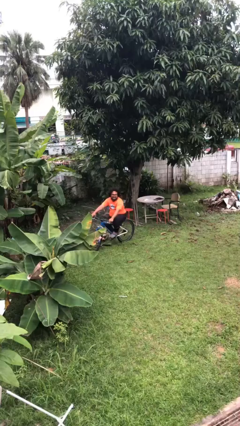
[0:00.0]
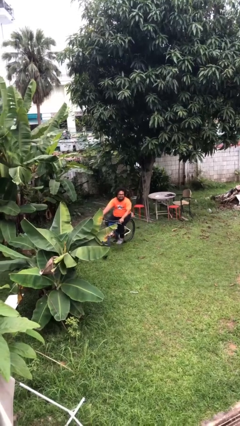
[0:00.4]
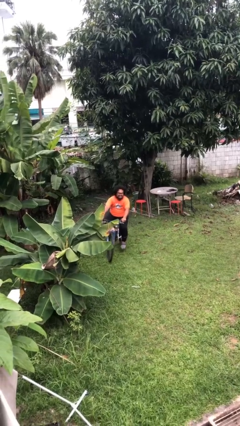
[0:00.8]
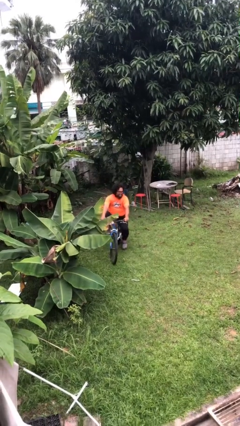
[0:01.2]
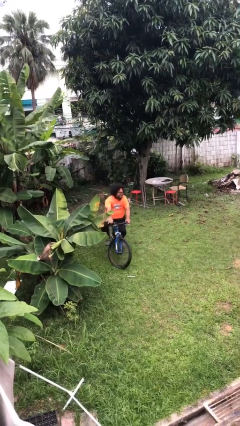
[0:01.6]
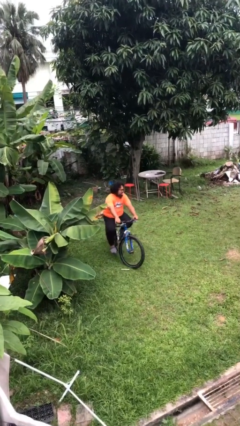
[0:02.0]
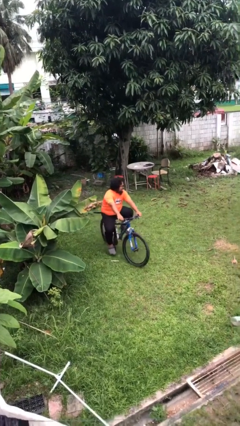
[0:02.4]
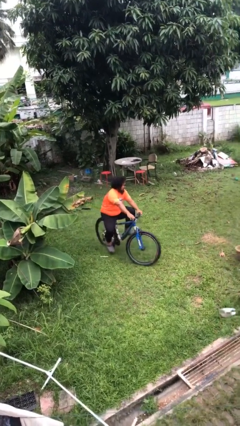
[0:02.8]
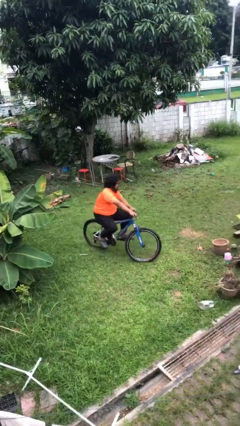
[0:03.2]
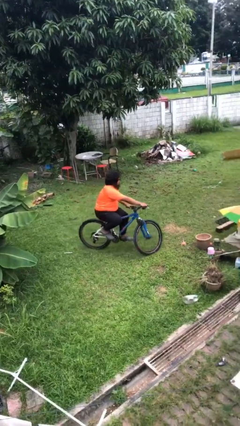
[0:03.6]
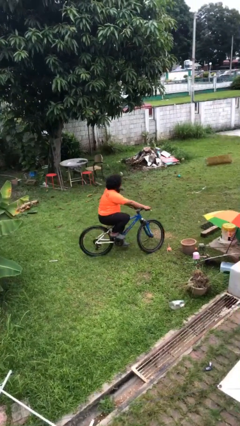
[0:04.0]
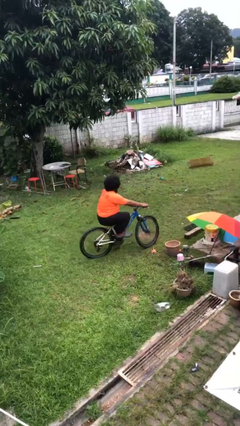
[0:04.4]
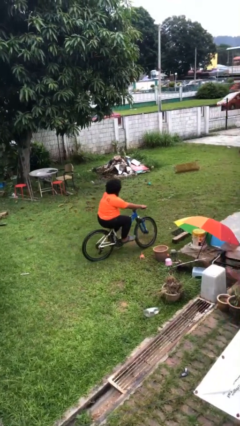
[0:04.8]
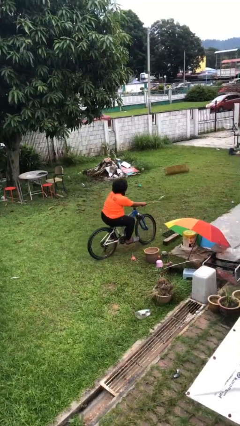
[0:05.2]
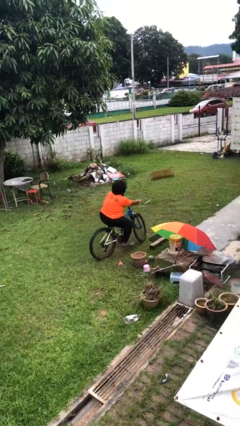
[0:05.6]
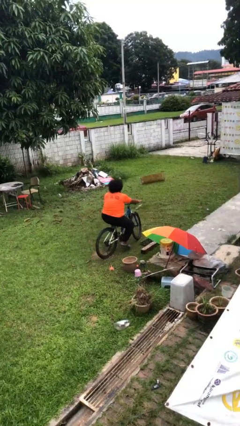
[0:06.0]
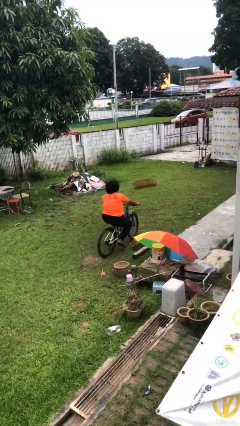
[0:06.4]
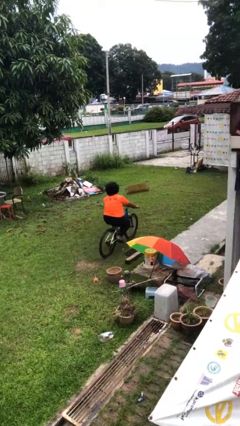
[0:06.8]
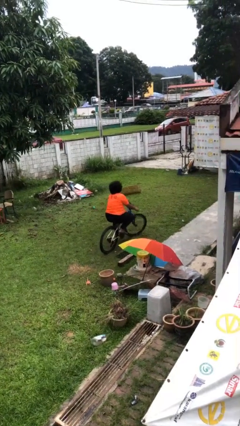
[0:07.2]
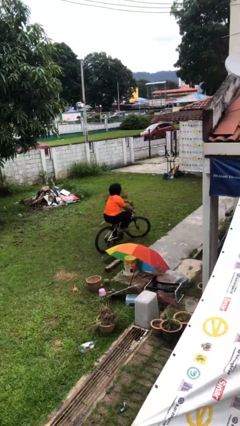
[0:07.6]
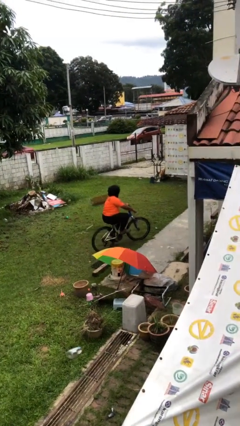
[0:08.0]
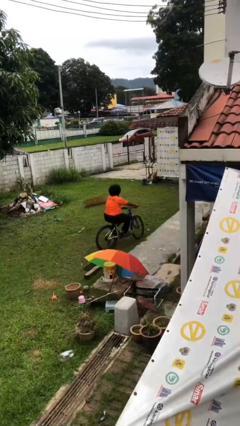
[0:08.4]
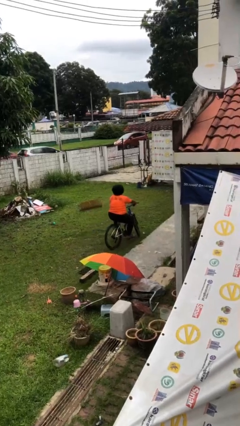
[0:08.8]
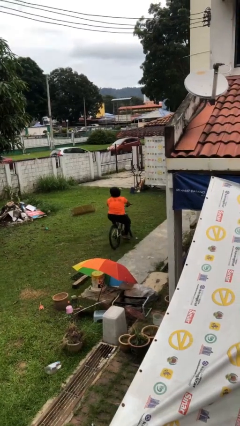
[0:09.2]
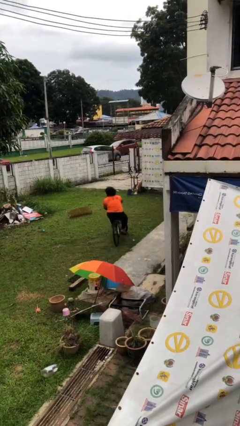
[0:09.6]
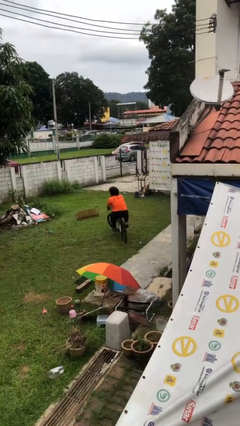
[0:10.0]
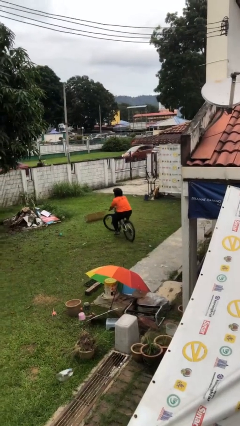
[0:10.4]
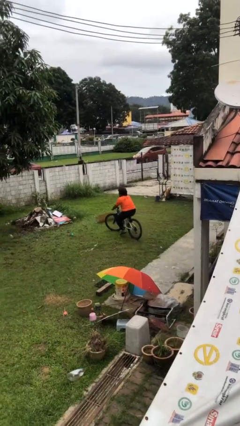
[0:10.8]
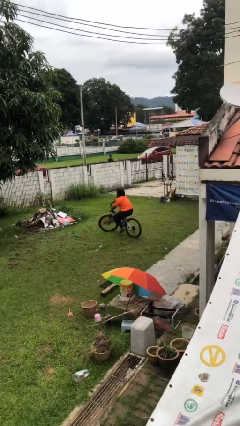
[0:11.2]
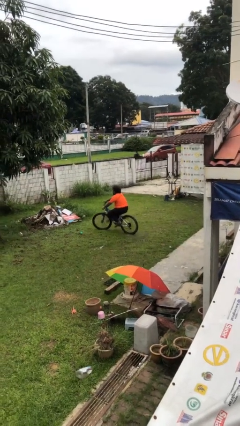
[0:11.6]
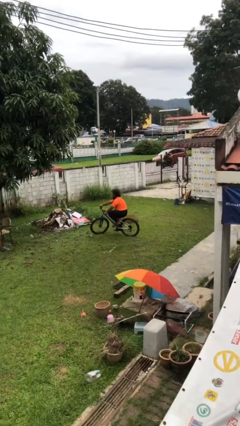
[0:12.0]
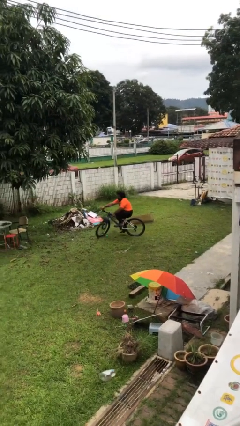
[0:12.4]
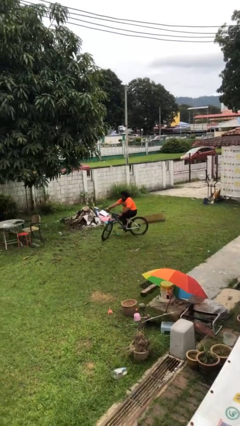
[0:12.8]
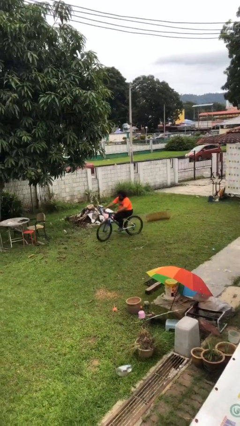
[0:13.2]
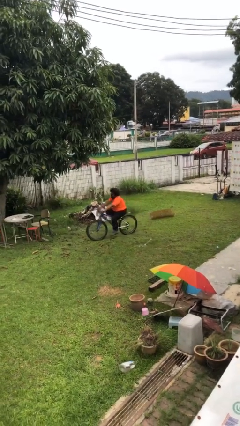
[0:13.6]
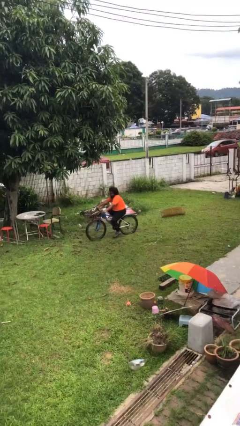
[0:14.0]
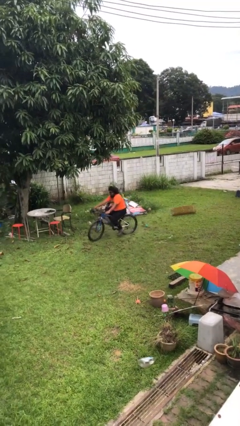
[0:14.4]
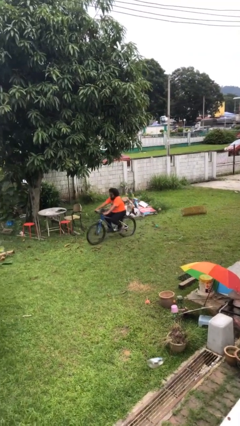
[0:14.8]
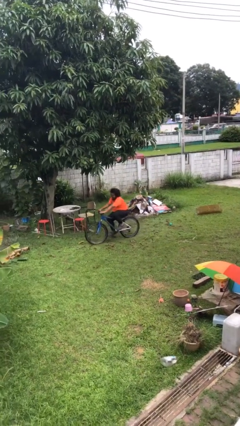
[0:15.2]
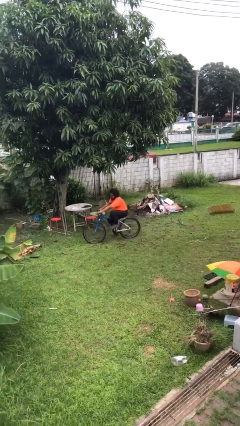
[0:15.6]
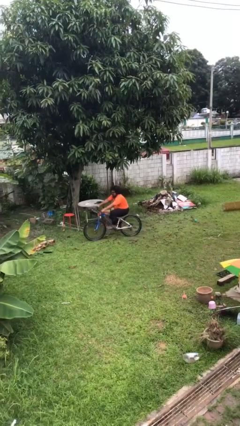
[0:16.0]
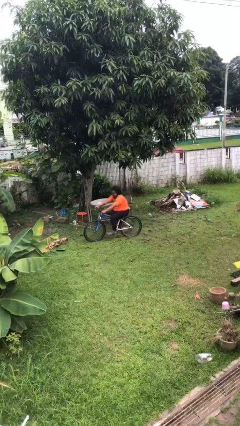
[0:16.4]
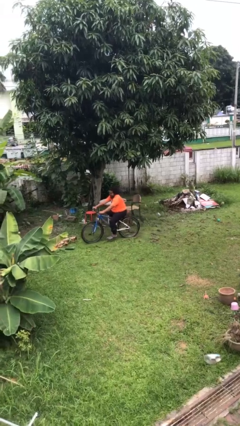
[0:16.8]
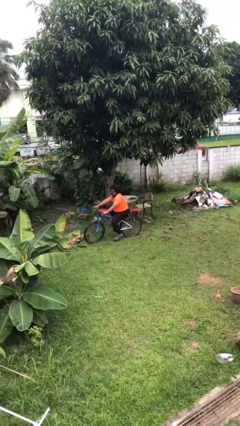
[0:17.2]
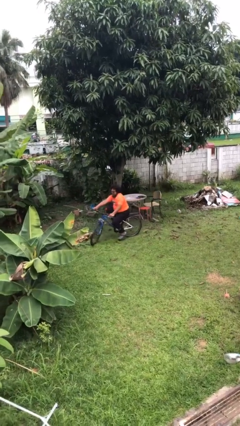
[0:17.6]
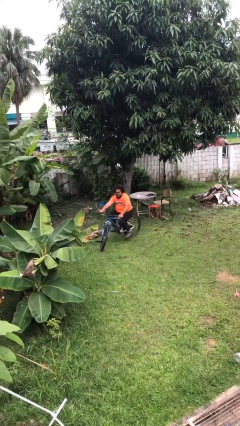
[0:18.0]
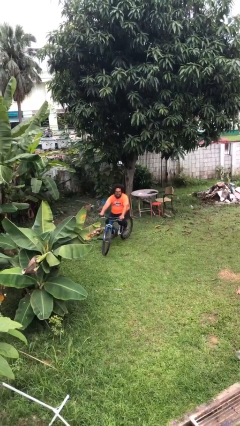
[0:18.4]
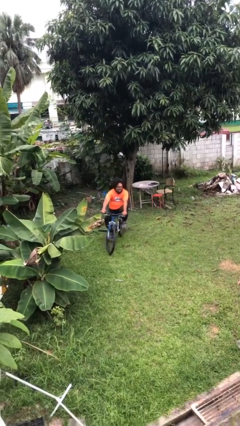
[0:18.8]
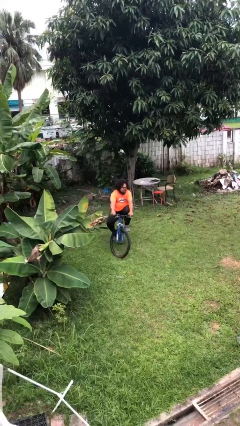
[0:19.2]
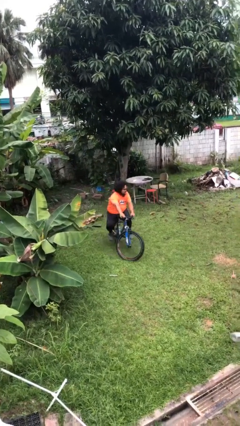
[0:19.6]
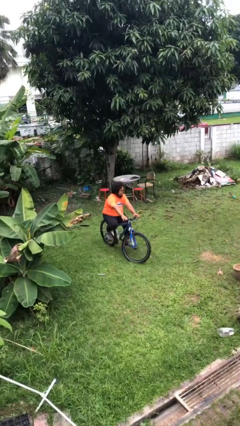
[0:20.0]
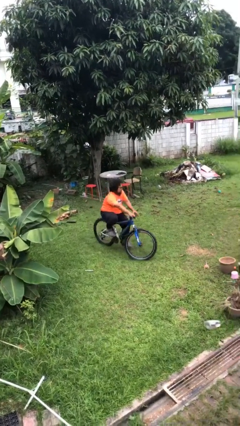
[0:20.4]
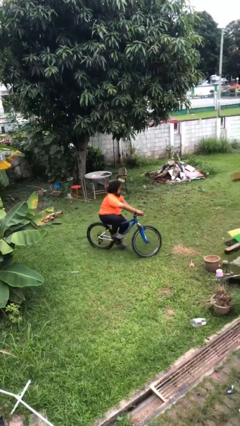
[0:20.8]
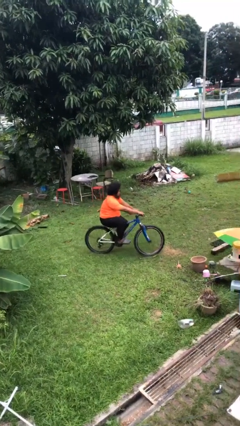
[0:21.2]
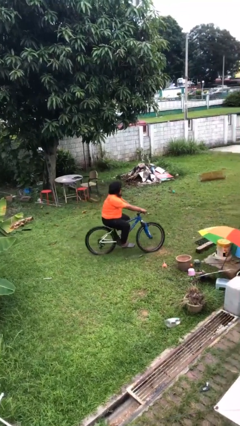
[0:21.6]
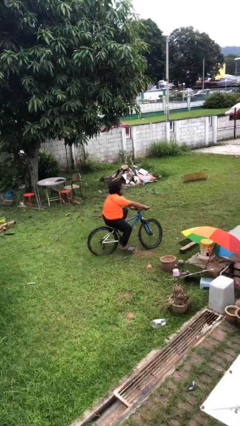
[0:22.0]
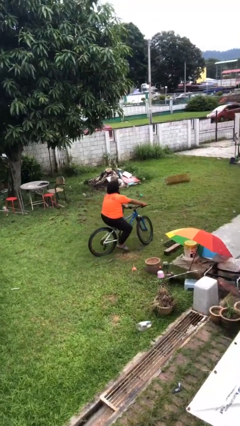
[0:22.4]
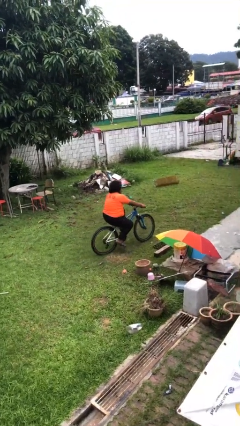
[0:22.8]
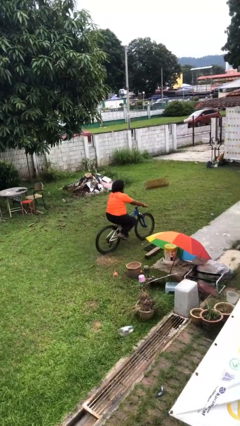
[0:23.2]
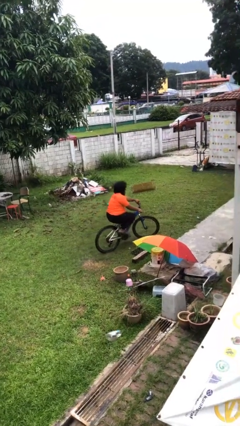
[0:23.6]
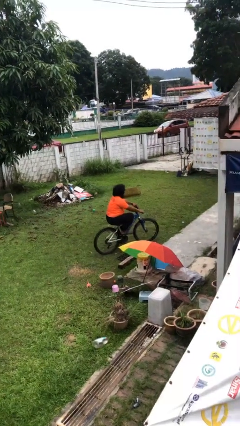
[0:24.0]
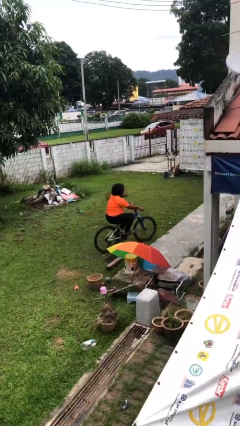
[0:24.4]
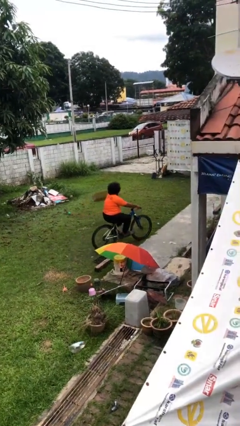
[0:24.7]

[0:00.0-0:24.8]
person rides bicycle

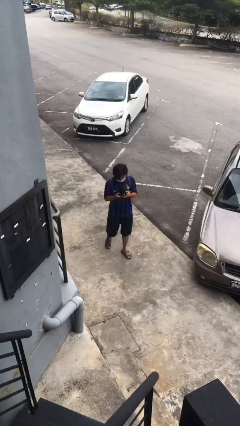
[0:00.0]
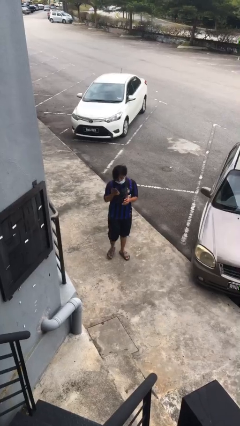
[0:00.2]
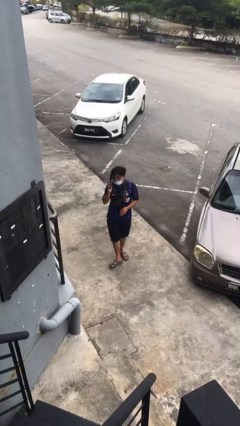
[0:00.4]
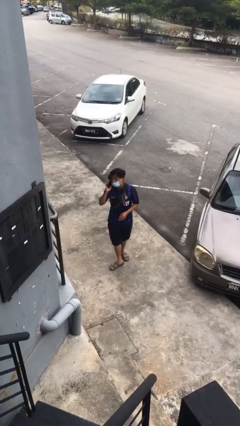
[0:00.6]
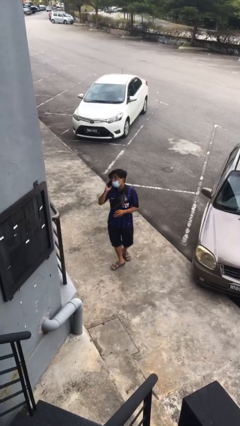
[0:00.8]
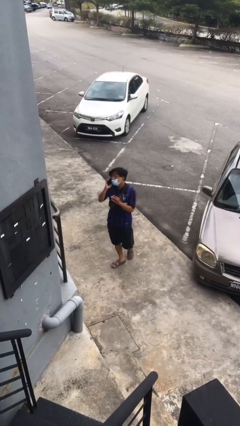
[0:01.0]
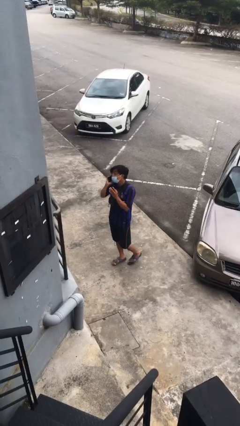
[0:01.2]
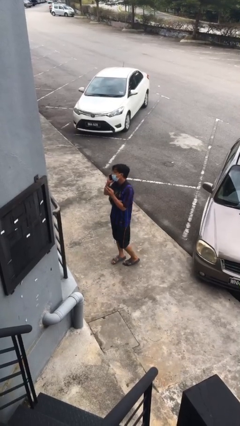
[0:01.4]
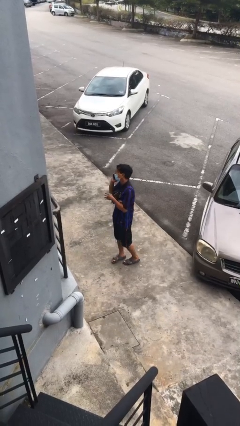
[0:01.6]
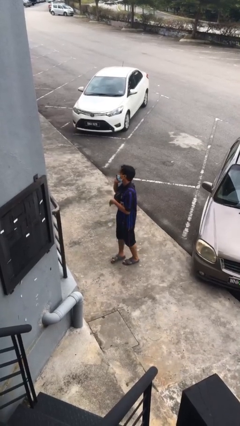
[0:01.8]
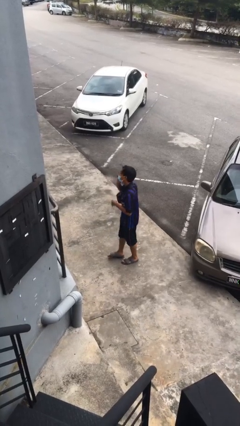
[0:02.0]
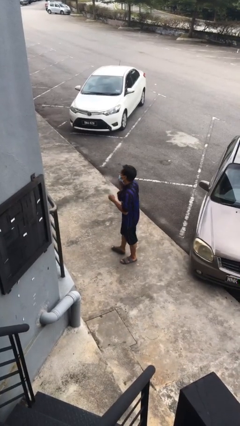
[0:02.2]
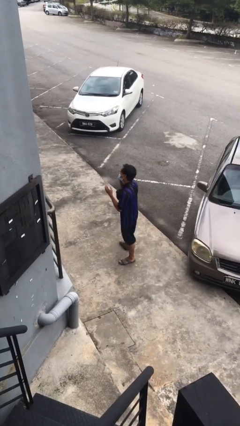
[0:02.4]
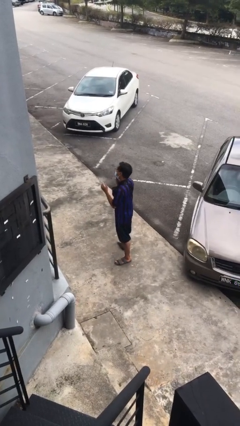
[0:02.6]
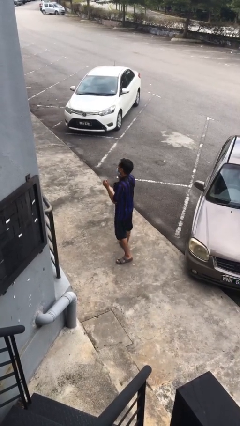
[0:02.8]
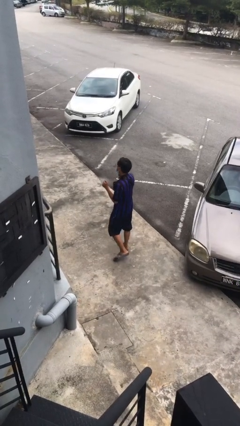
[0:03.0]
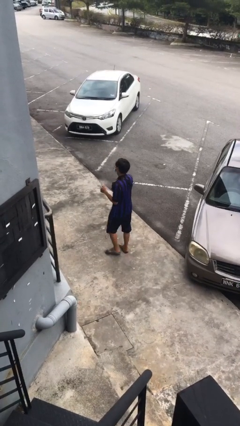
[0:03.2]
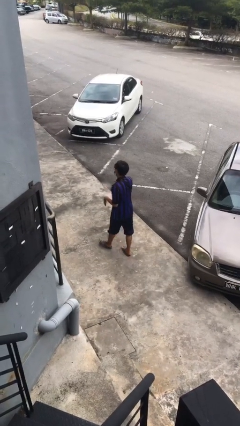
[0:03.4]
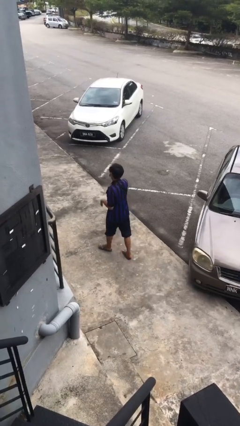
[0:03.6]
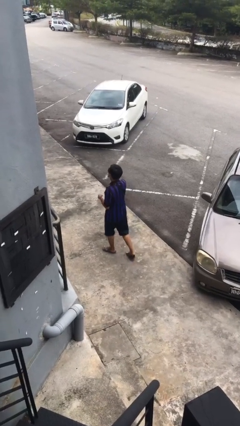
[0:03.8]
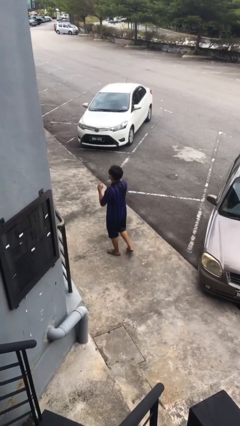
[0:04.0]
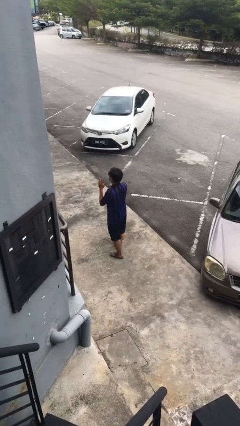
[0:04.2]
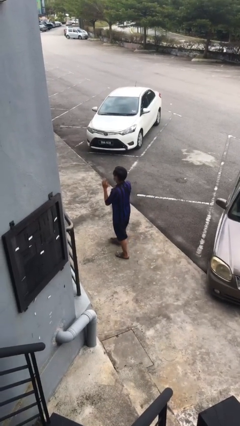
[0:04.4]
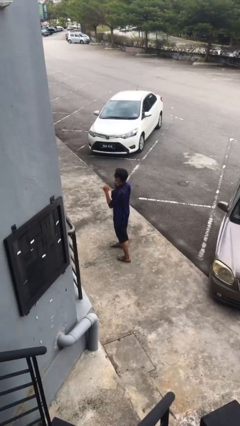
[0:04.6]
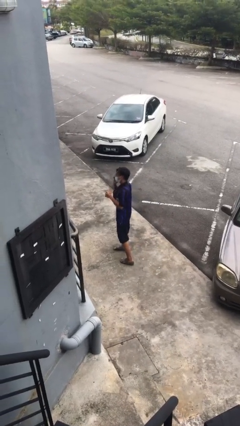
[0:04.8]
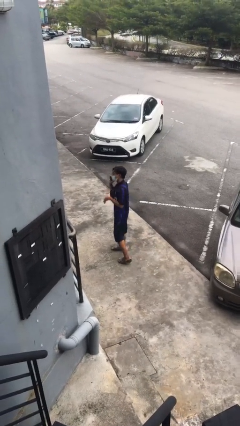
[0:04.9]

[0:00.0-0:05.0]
person talks on phone

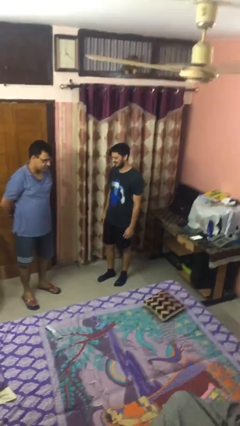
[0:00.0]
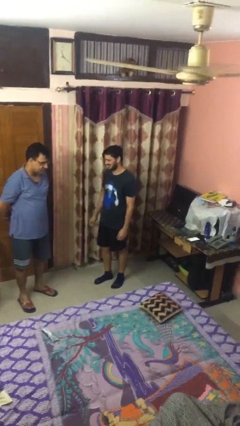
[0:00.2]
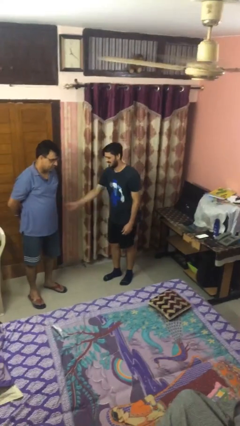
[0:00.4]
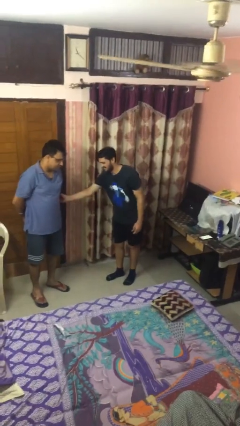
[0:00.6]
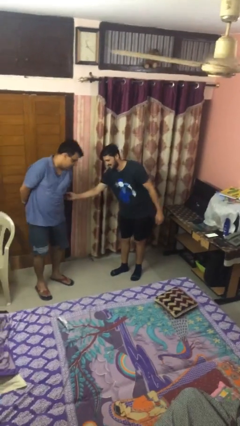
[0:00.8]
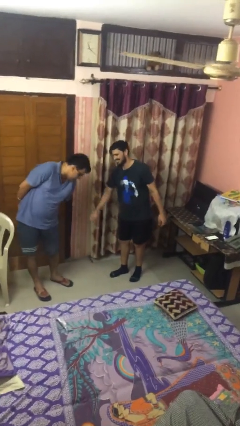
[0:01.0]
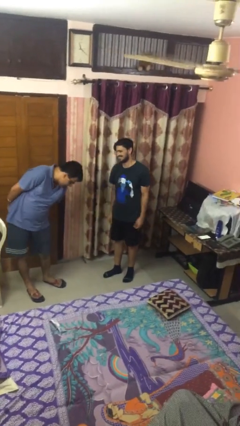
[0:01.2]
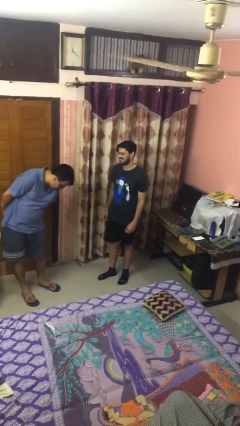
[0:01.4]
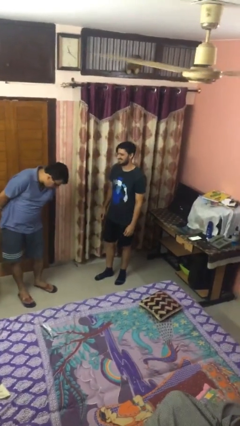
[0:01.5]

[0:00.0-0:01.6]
person tickles person
